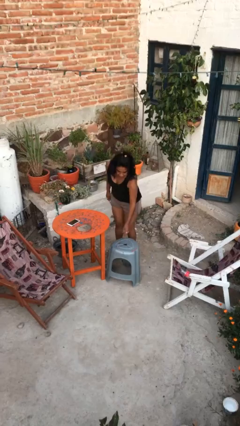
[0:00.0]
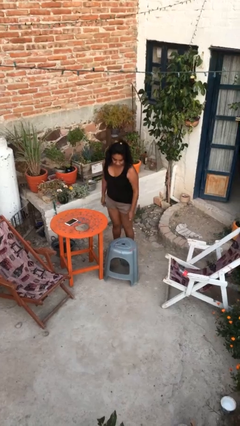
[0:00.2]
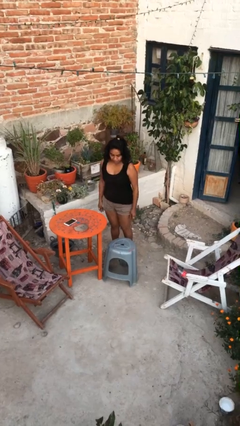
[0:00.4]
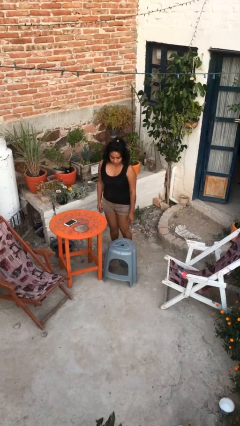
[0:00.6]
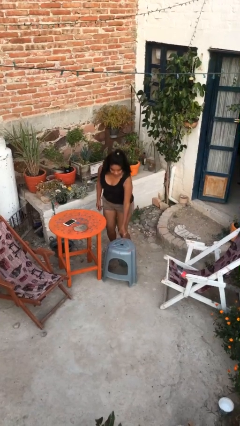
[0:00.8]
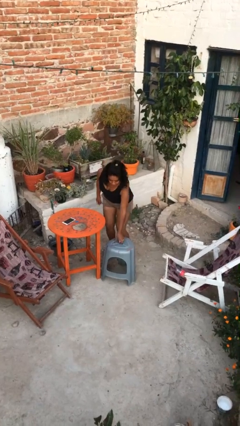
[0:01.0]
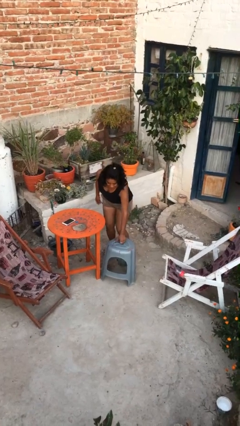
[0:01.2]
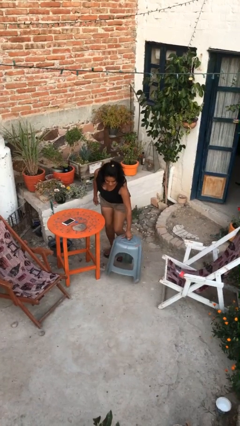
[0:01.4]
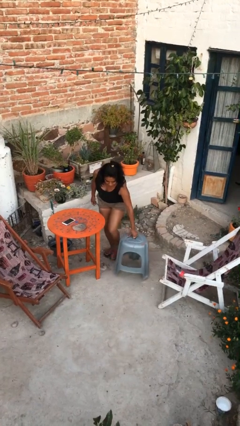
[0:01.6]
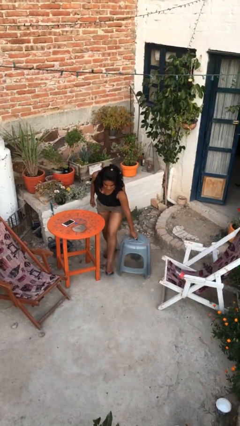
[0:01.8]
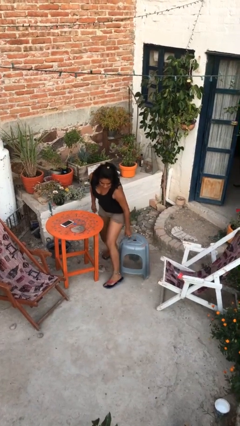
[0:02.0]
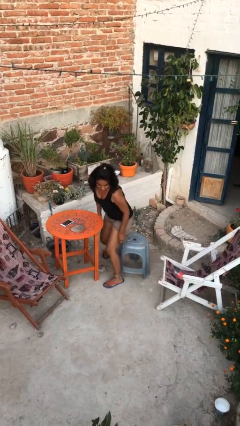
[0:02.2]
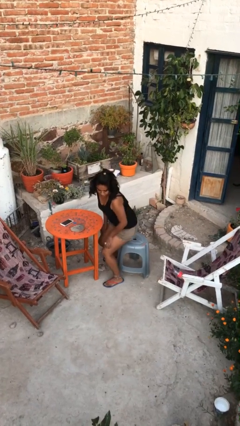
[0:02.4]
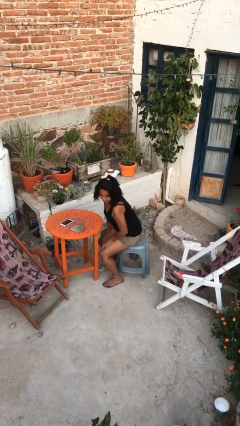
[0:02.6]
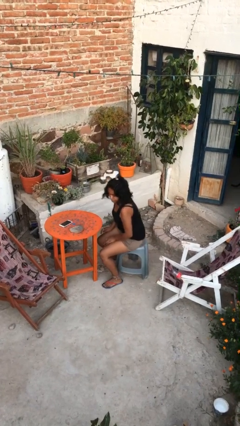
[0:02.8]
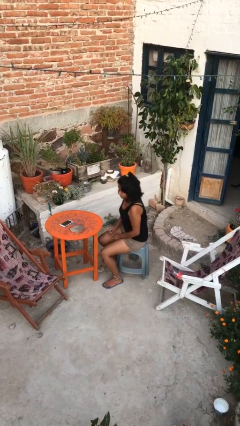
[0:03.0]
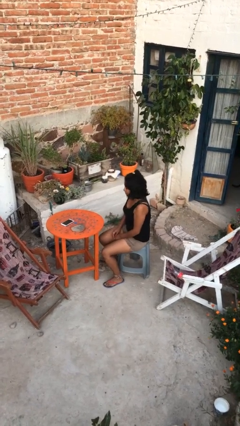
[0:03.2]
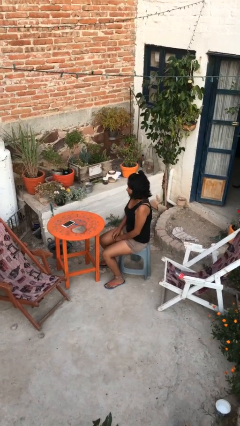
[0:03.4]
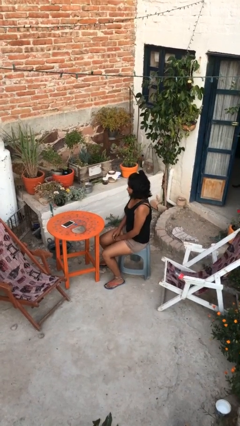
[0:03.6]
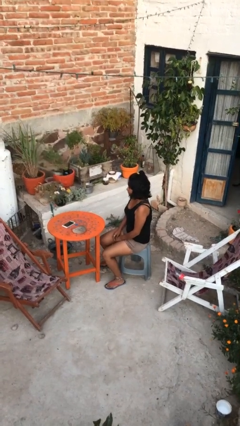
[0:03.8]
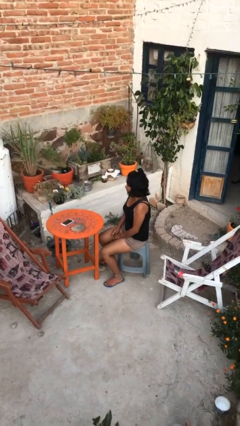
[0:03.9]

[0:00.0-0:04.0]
person sits down

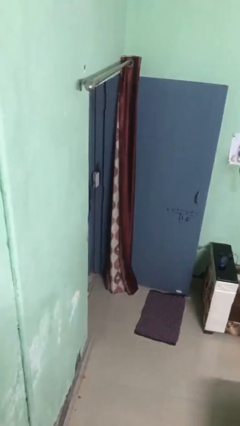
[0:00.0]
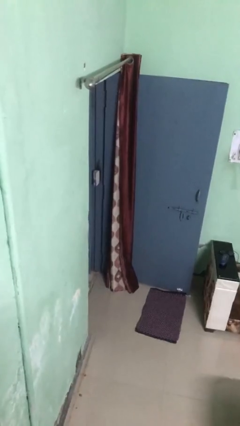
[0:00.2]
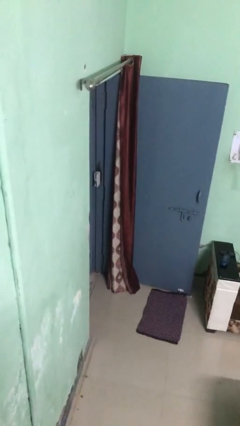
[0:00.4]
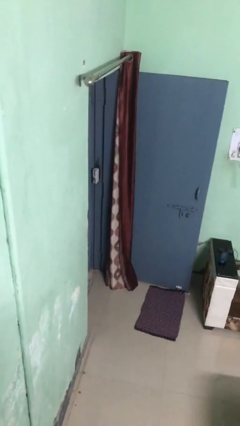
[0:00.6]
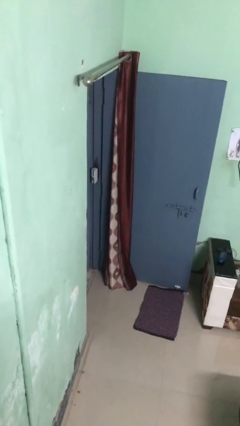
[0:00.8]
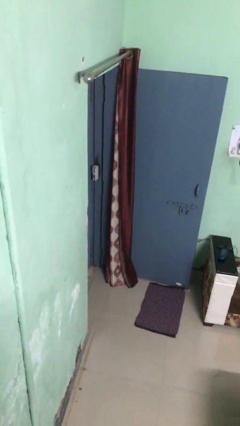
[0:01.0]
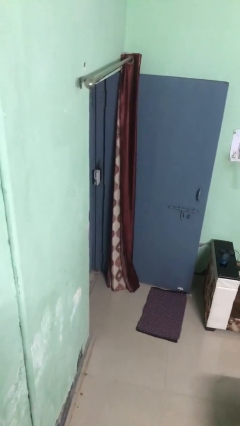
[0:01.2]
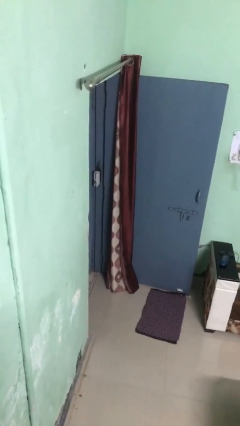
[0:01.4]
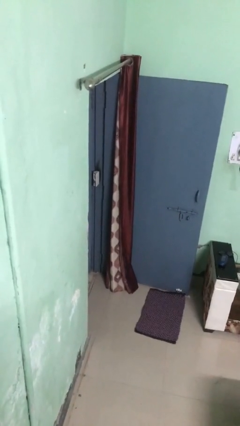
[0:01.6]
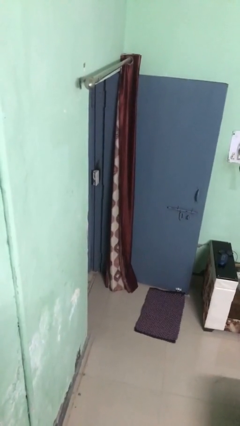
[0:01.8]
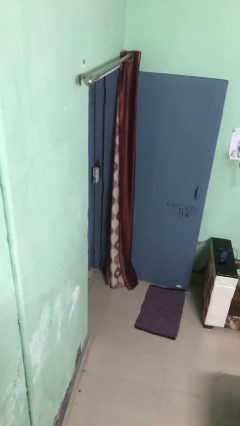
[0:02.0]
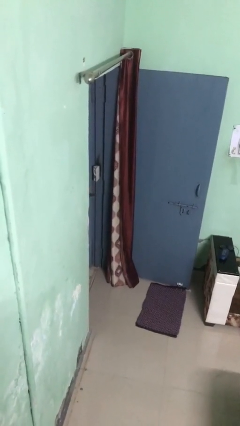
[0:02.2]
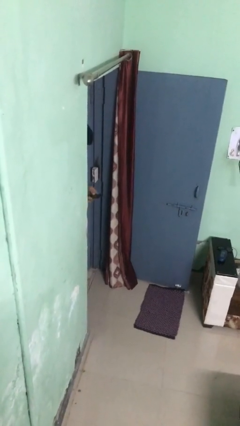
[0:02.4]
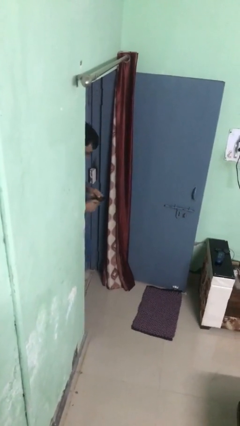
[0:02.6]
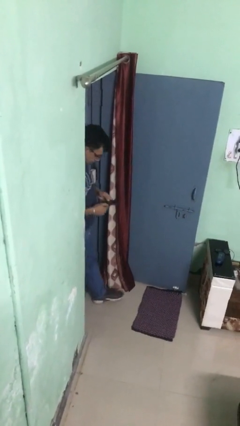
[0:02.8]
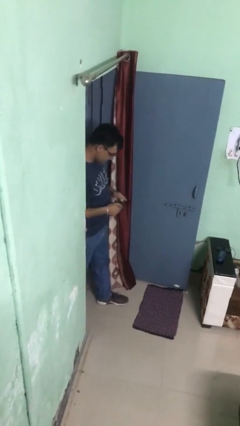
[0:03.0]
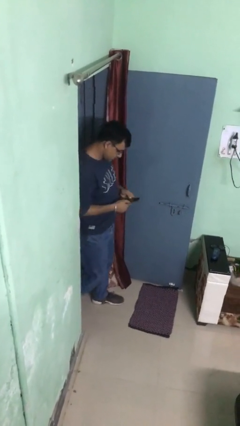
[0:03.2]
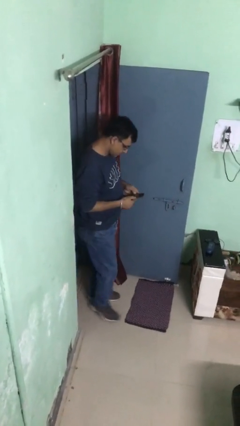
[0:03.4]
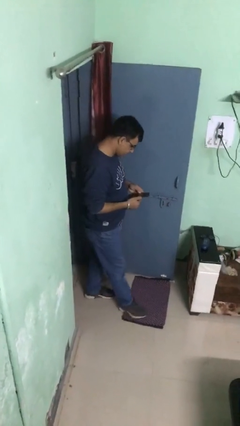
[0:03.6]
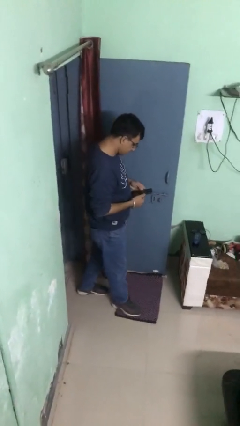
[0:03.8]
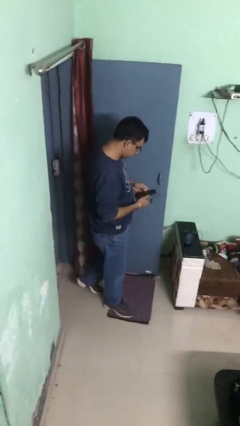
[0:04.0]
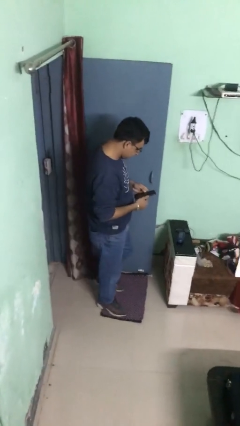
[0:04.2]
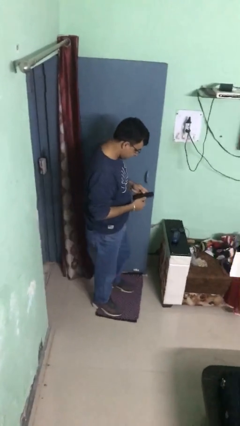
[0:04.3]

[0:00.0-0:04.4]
person enters scene through structure

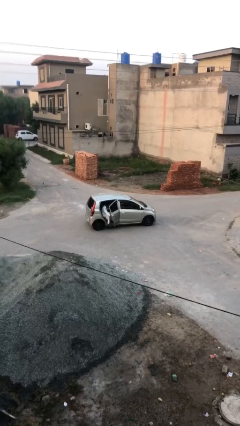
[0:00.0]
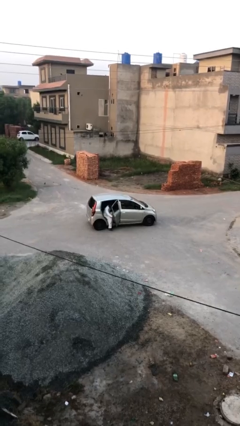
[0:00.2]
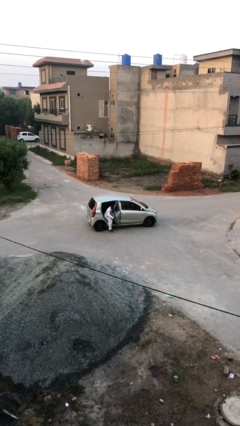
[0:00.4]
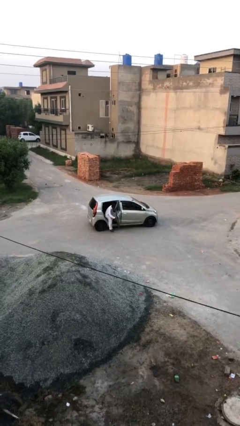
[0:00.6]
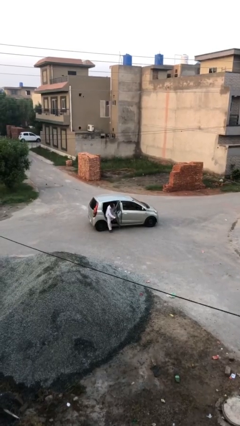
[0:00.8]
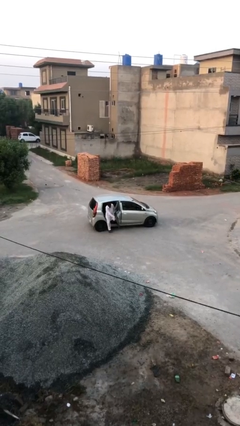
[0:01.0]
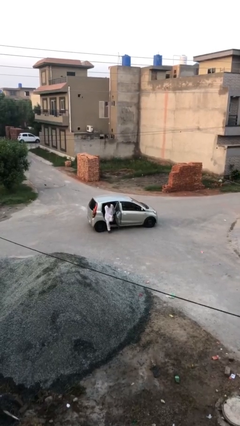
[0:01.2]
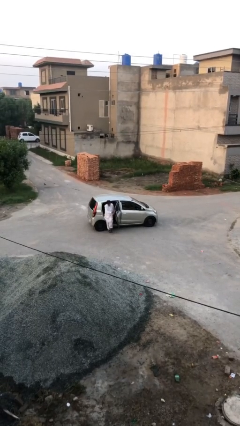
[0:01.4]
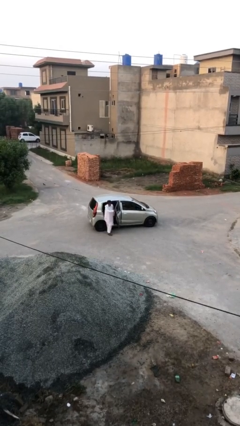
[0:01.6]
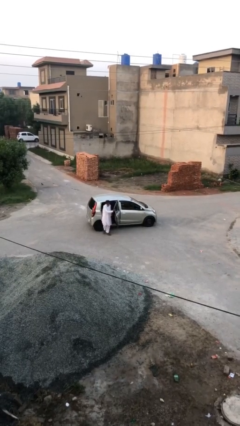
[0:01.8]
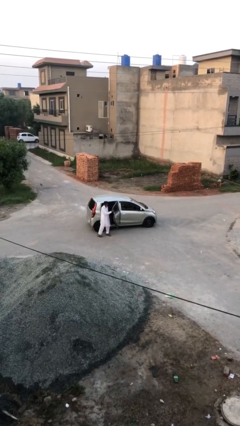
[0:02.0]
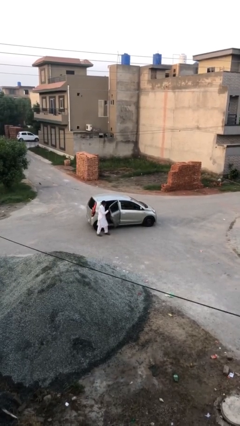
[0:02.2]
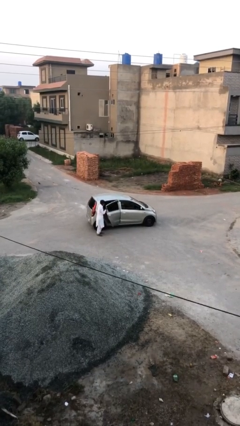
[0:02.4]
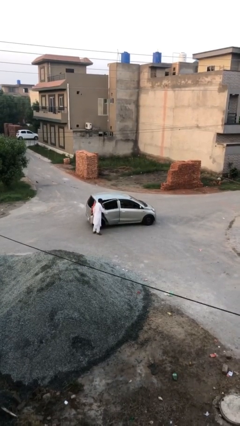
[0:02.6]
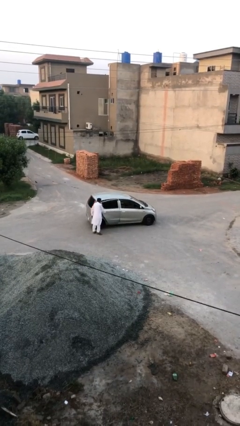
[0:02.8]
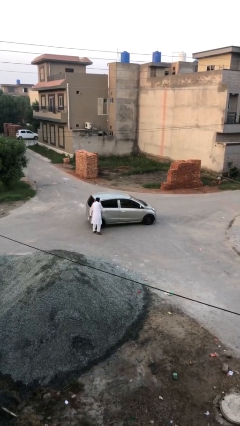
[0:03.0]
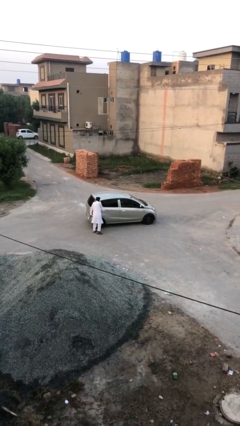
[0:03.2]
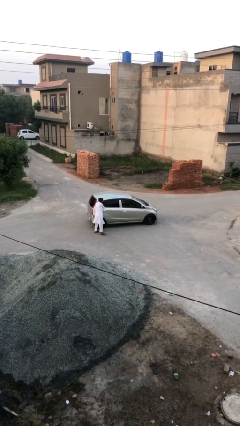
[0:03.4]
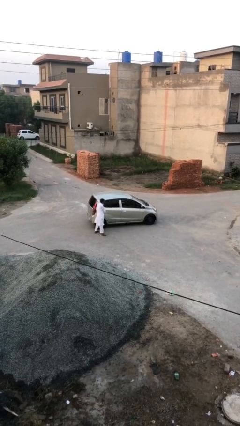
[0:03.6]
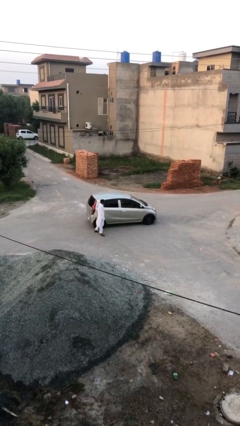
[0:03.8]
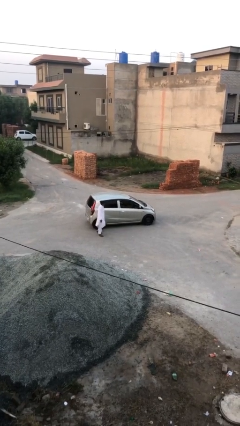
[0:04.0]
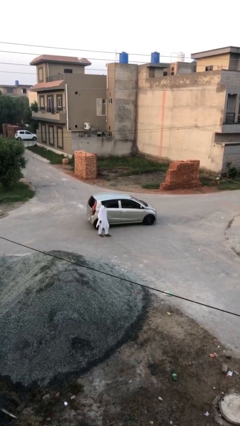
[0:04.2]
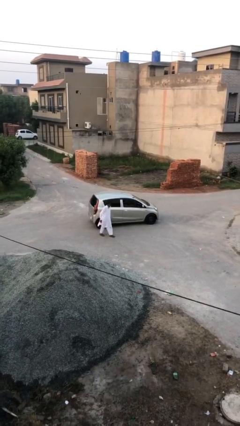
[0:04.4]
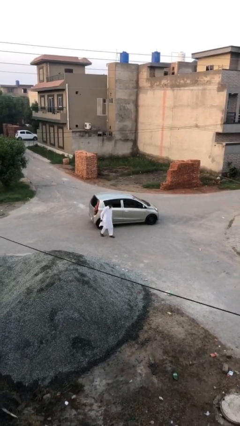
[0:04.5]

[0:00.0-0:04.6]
car drops off person

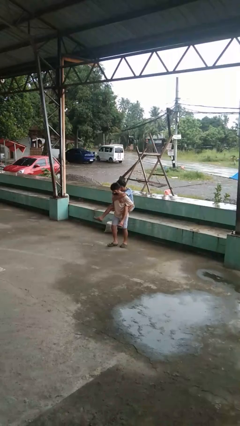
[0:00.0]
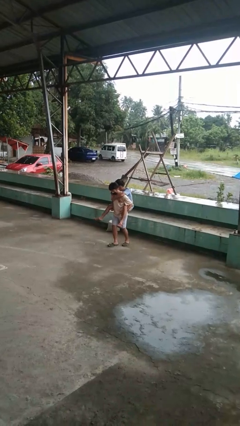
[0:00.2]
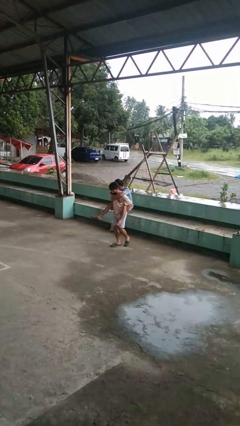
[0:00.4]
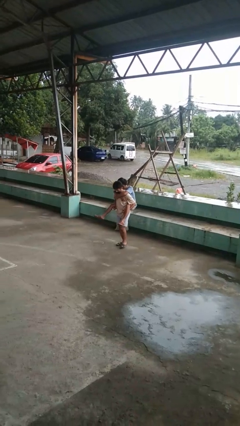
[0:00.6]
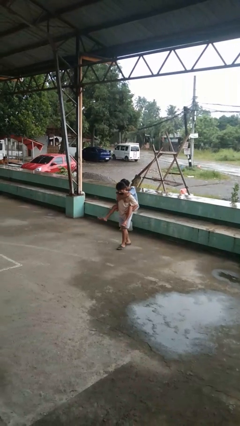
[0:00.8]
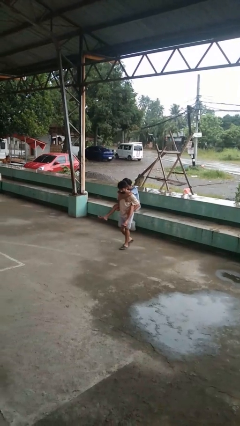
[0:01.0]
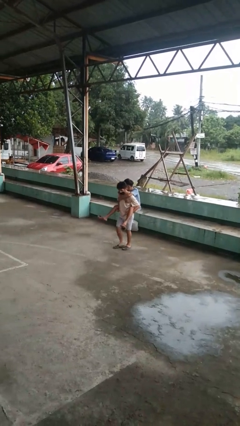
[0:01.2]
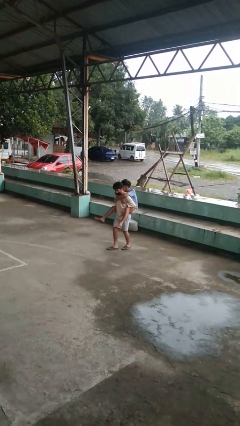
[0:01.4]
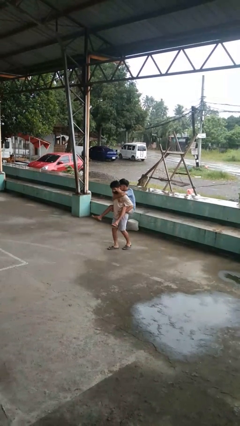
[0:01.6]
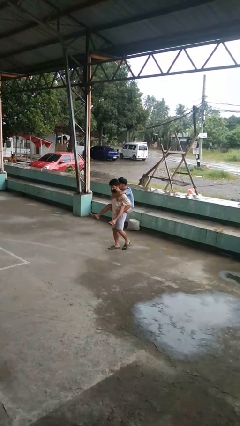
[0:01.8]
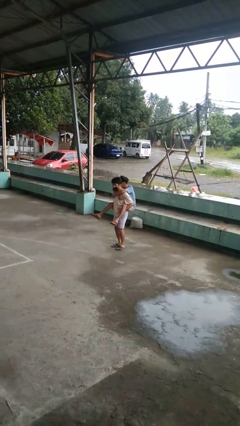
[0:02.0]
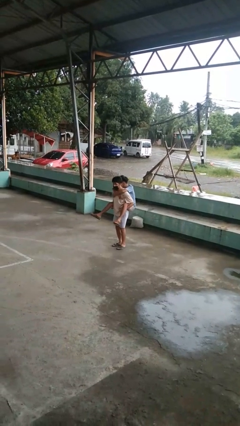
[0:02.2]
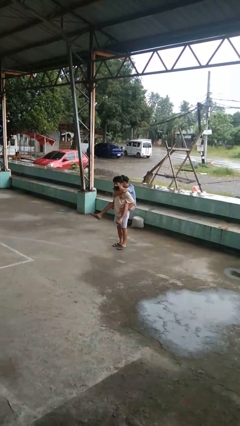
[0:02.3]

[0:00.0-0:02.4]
person carries person on back

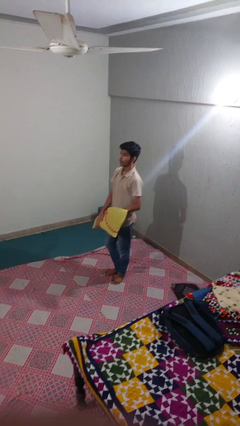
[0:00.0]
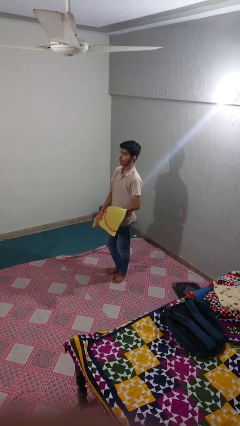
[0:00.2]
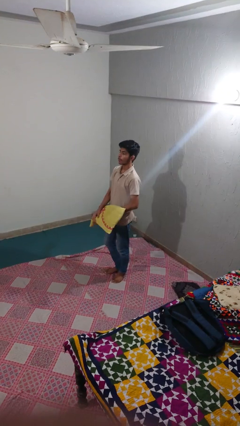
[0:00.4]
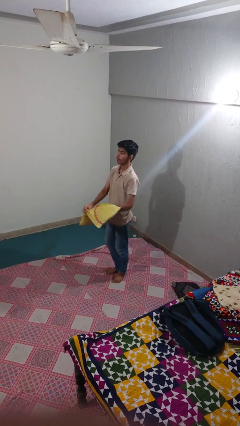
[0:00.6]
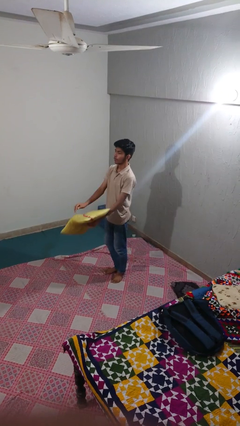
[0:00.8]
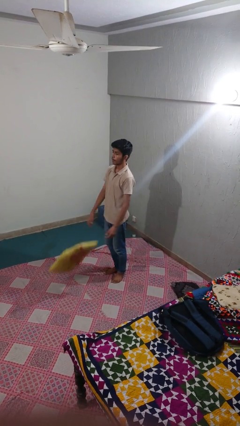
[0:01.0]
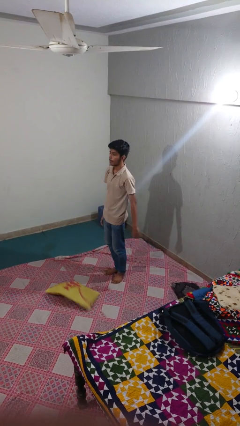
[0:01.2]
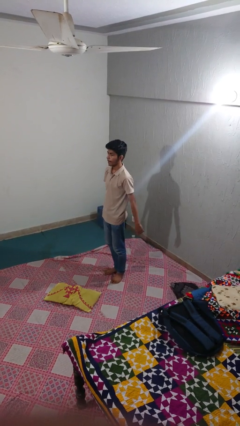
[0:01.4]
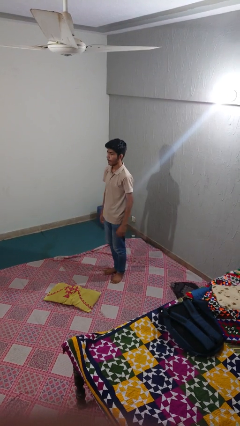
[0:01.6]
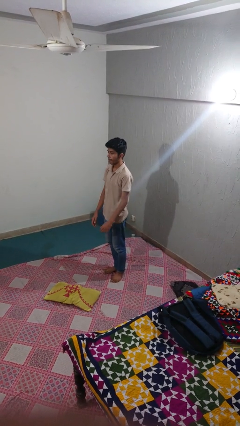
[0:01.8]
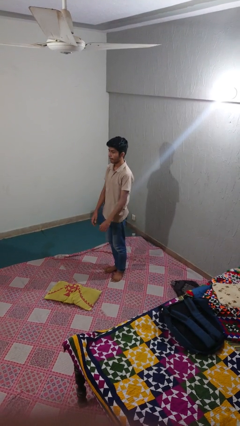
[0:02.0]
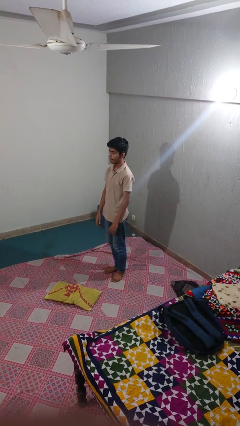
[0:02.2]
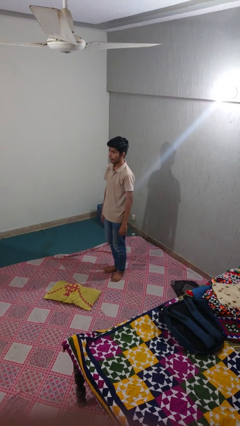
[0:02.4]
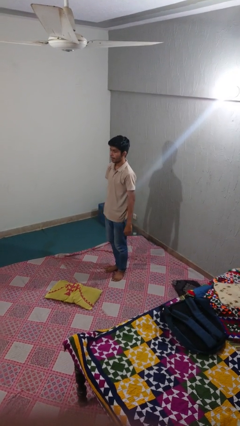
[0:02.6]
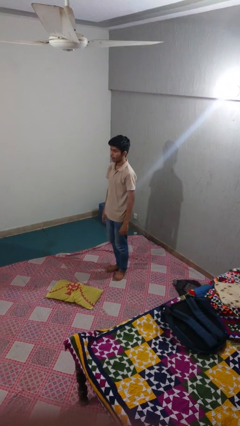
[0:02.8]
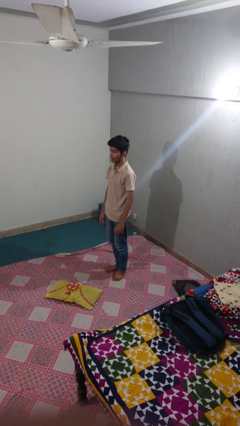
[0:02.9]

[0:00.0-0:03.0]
person drops object
